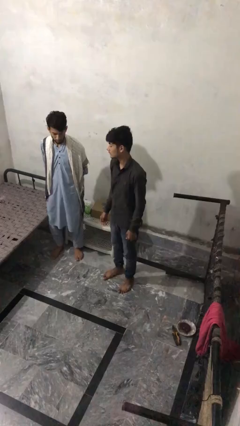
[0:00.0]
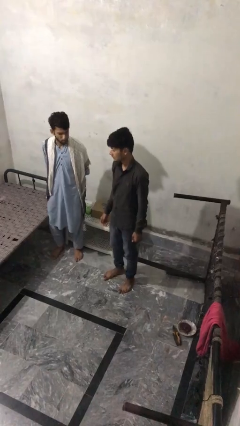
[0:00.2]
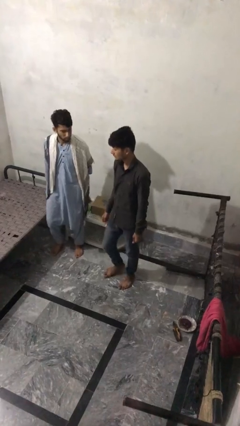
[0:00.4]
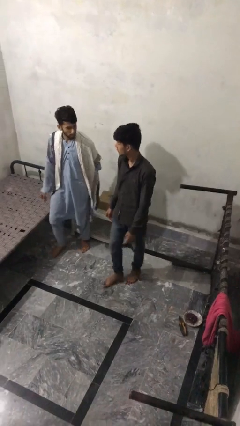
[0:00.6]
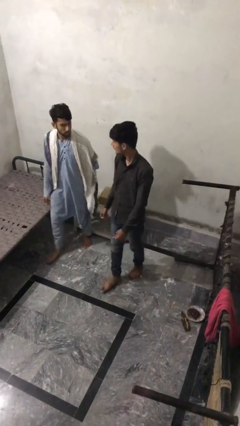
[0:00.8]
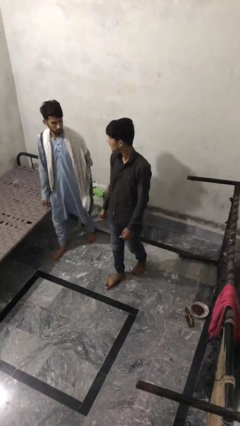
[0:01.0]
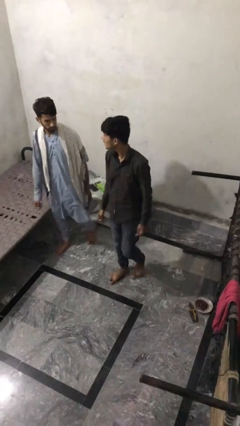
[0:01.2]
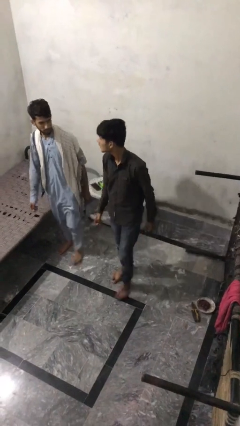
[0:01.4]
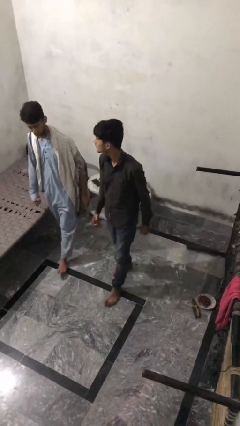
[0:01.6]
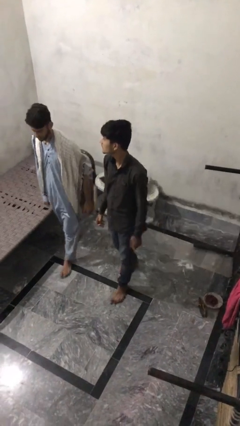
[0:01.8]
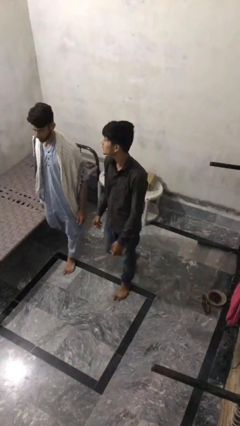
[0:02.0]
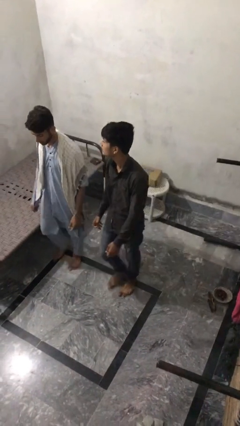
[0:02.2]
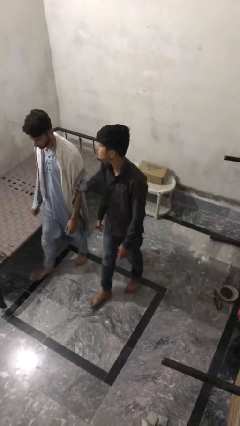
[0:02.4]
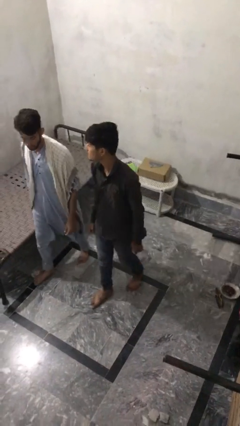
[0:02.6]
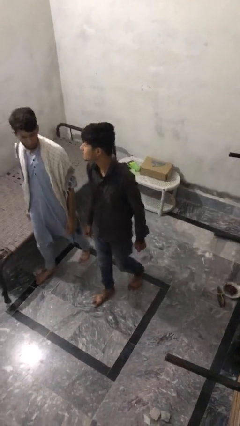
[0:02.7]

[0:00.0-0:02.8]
person talks to person

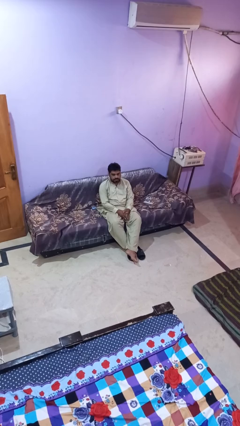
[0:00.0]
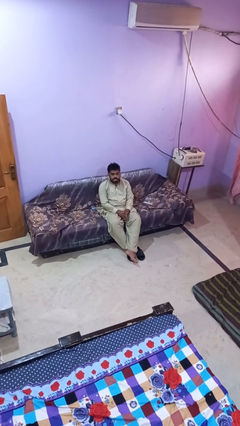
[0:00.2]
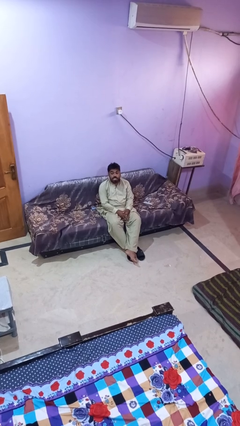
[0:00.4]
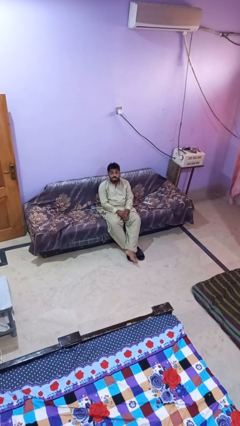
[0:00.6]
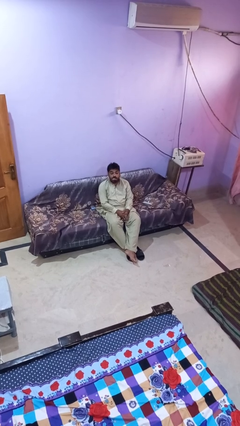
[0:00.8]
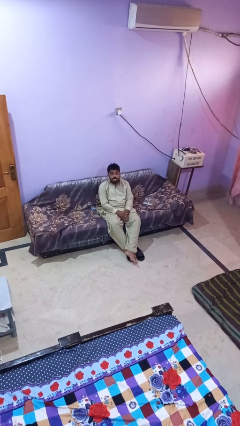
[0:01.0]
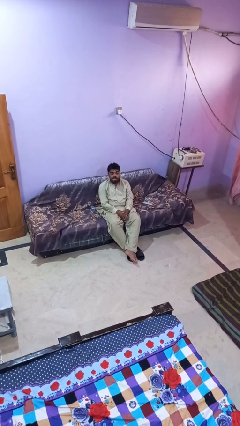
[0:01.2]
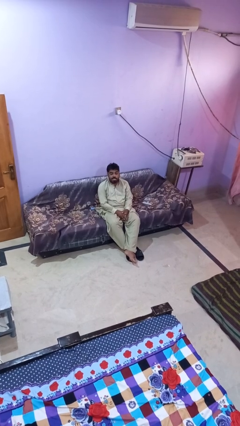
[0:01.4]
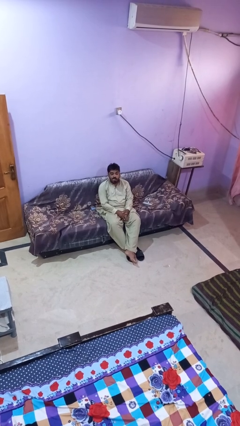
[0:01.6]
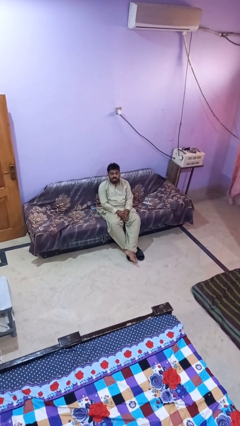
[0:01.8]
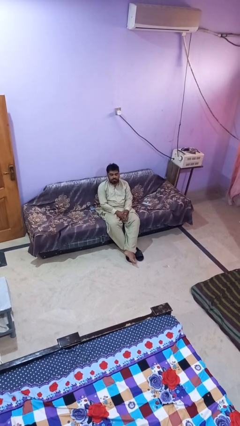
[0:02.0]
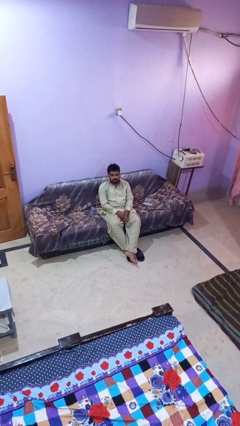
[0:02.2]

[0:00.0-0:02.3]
person sticks out tongue

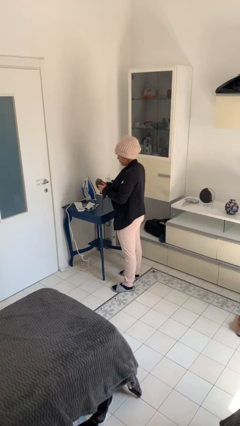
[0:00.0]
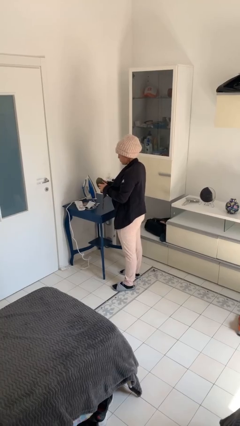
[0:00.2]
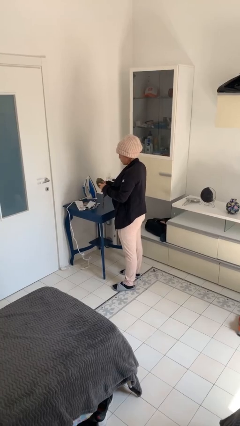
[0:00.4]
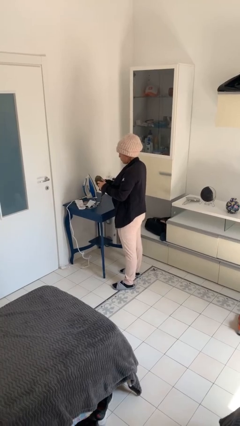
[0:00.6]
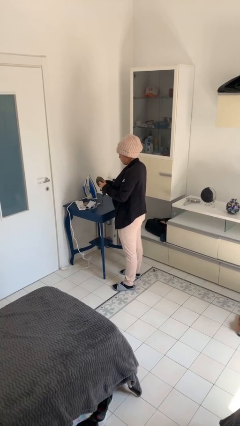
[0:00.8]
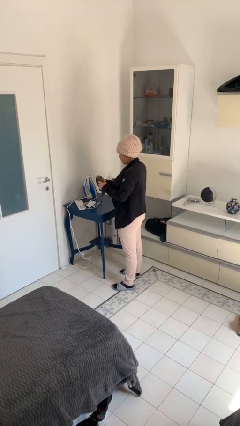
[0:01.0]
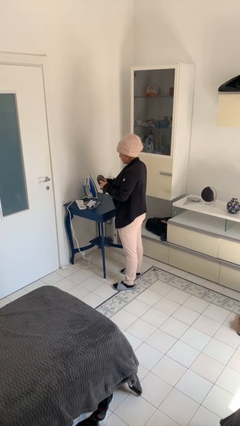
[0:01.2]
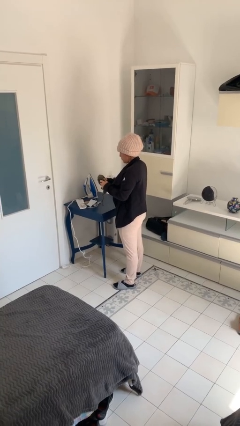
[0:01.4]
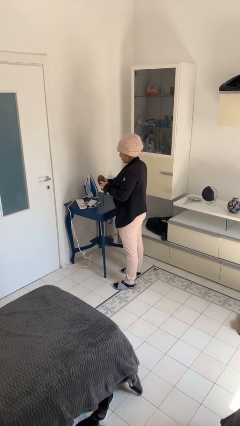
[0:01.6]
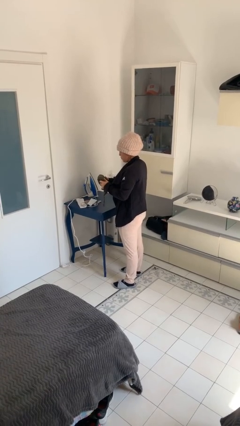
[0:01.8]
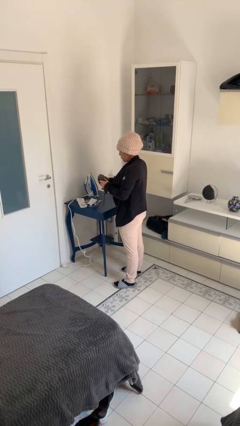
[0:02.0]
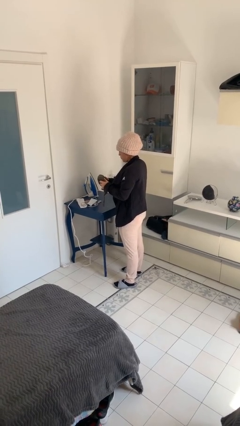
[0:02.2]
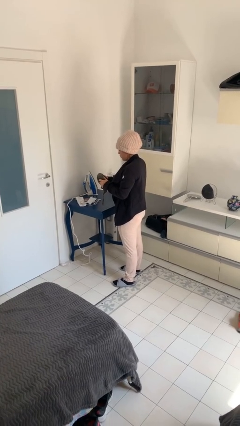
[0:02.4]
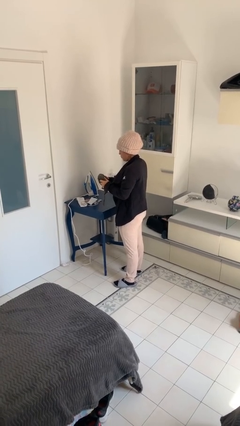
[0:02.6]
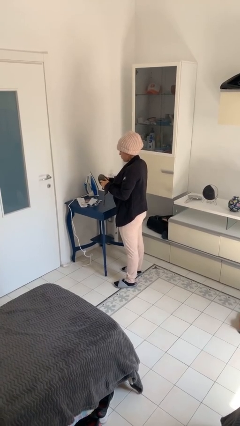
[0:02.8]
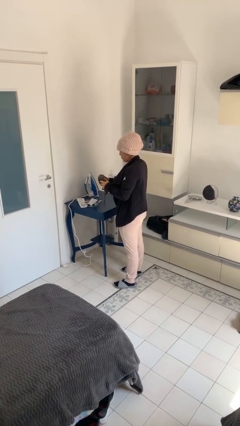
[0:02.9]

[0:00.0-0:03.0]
person squeezes object

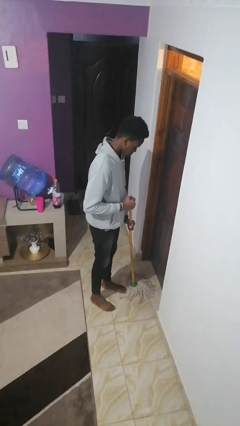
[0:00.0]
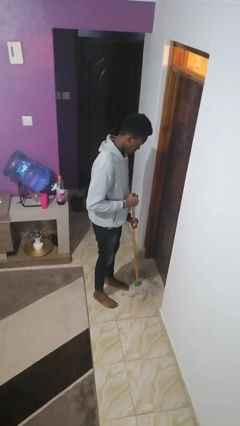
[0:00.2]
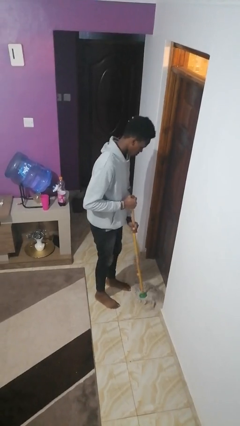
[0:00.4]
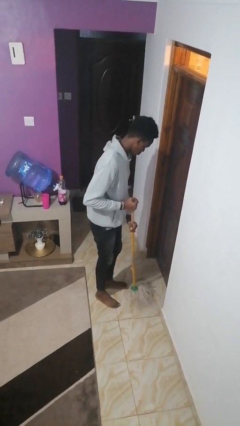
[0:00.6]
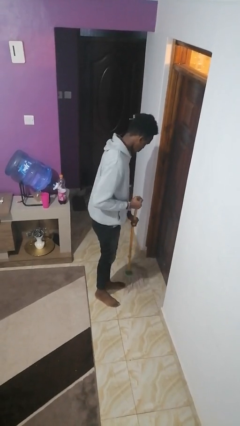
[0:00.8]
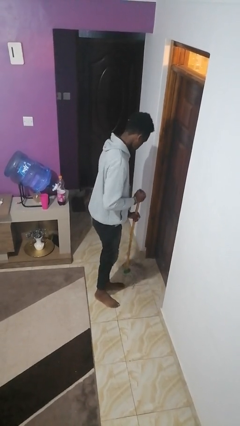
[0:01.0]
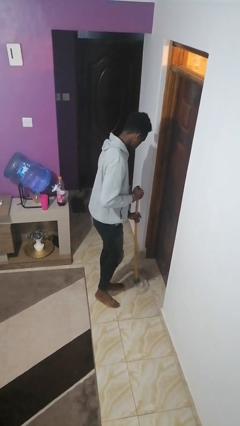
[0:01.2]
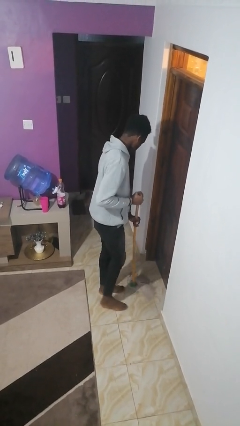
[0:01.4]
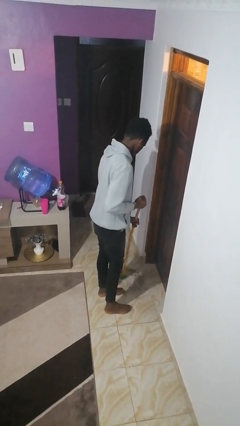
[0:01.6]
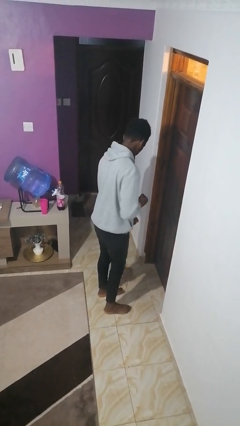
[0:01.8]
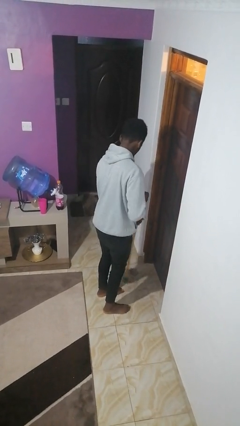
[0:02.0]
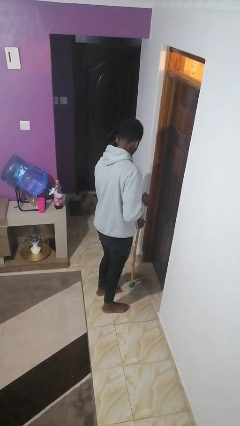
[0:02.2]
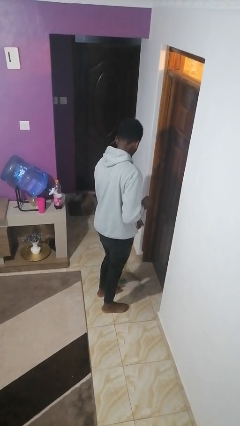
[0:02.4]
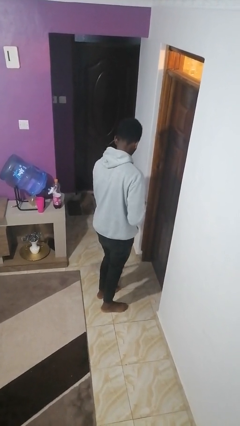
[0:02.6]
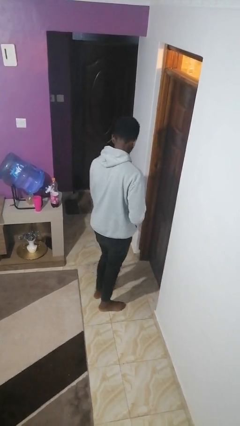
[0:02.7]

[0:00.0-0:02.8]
person mops

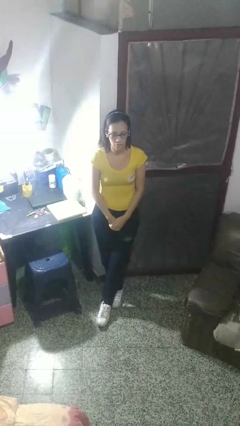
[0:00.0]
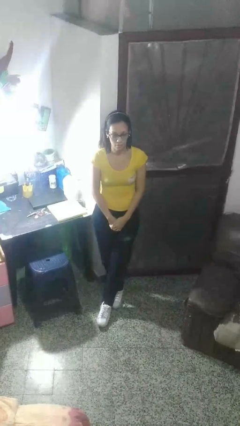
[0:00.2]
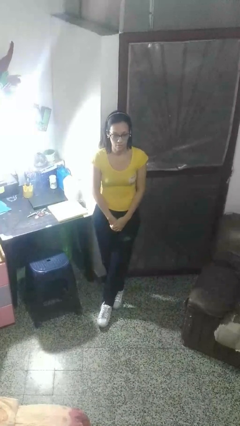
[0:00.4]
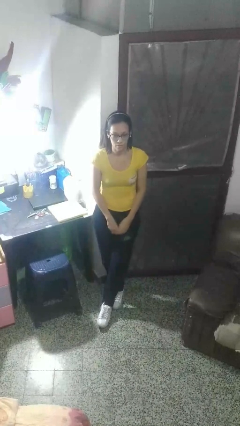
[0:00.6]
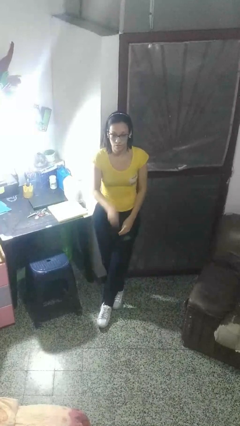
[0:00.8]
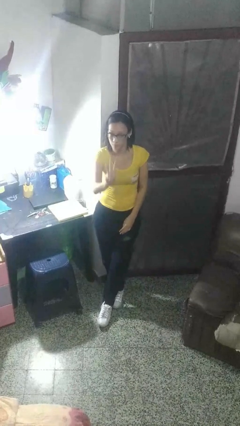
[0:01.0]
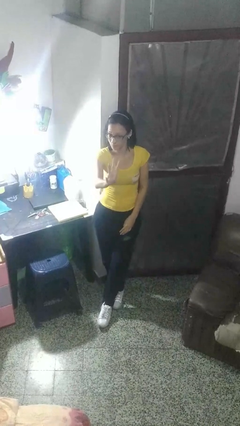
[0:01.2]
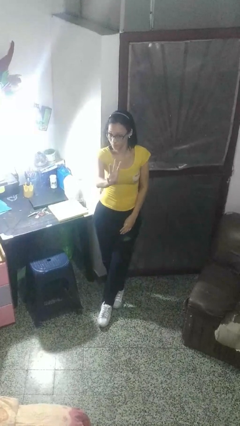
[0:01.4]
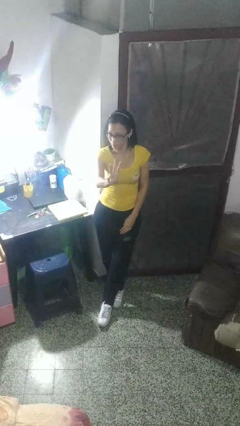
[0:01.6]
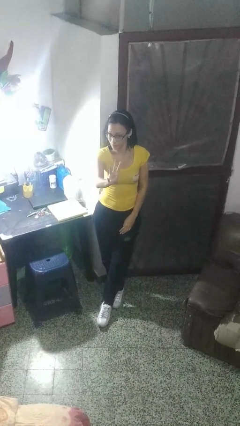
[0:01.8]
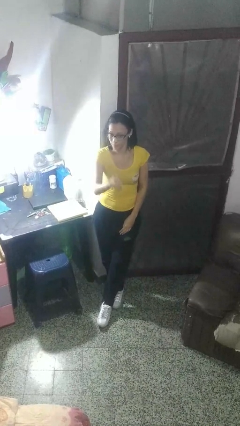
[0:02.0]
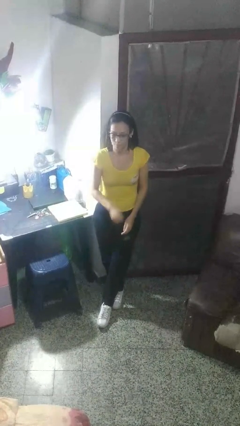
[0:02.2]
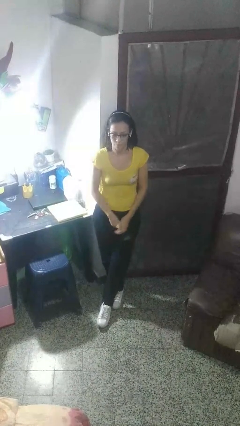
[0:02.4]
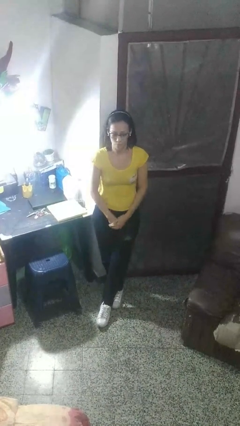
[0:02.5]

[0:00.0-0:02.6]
person gestures number three

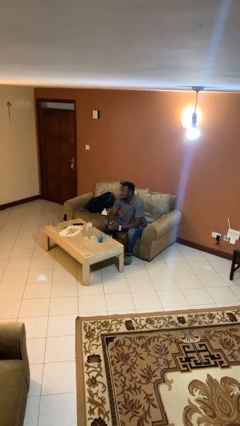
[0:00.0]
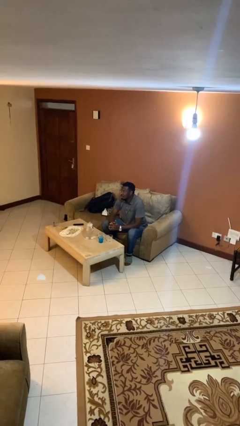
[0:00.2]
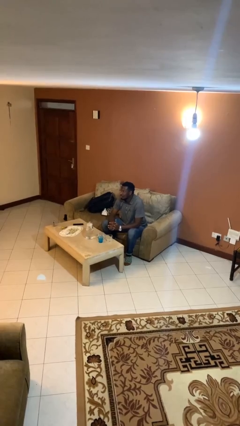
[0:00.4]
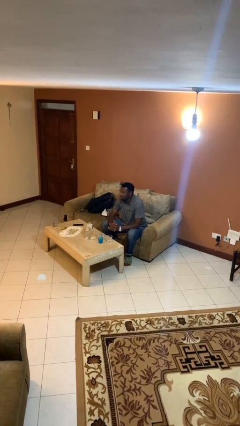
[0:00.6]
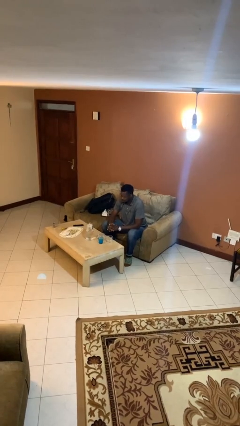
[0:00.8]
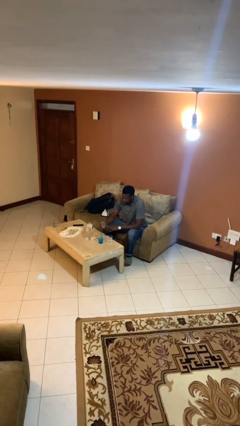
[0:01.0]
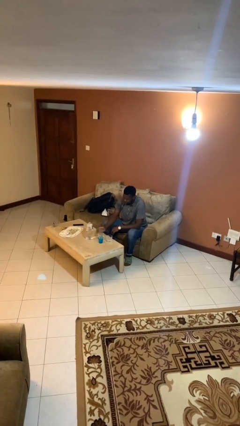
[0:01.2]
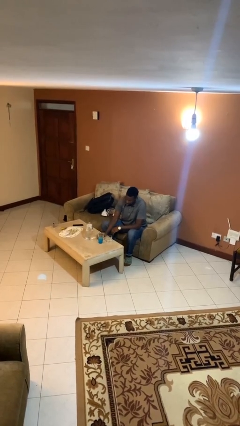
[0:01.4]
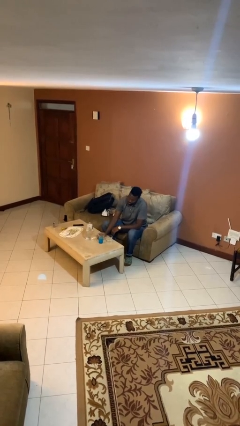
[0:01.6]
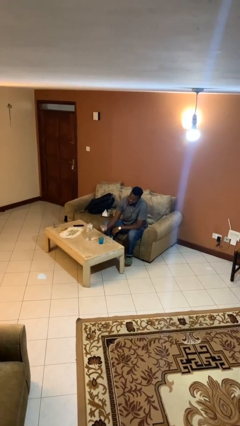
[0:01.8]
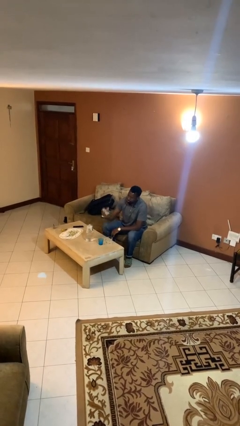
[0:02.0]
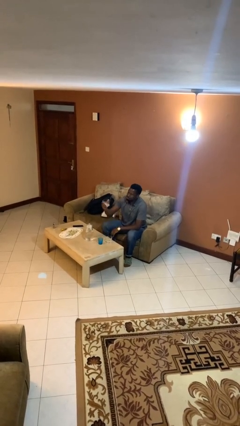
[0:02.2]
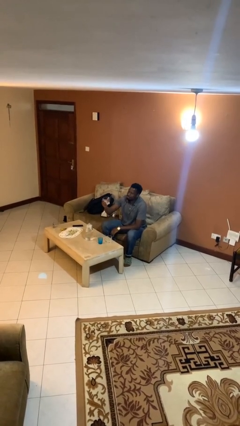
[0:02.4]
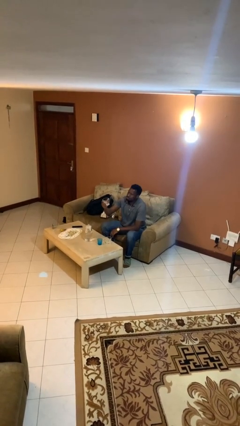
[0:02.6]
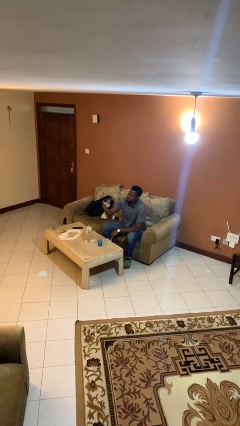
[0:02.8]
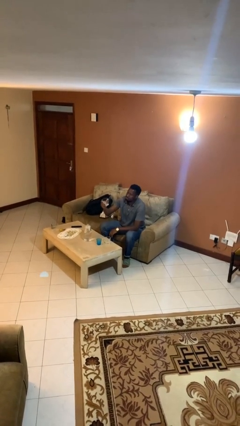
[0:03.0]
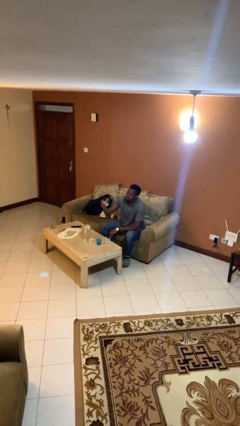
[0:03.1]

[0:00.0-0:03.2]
person picks up object from table

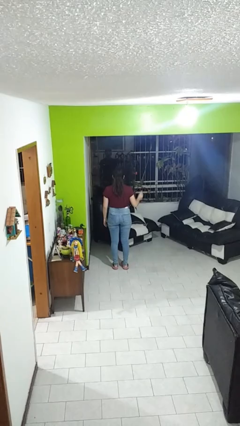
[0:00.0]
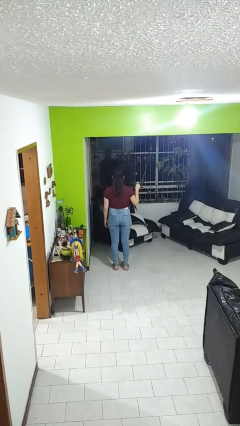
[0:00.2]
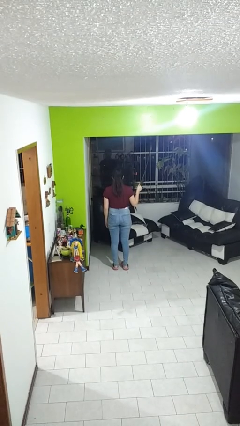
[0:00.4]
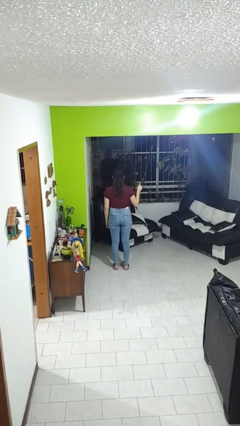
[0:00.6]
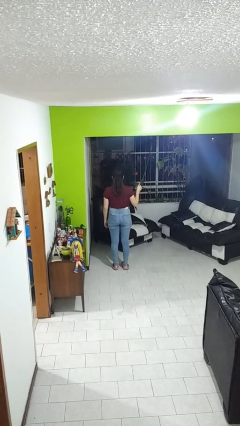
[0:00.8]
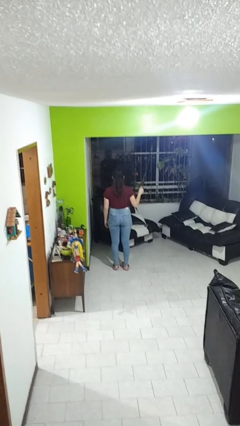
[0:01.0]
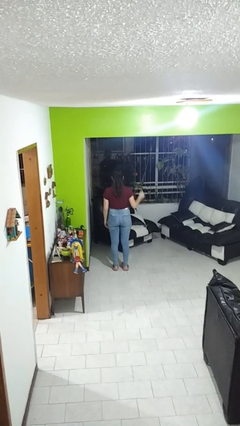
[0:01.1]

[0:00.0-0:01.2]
person gestures thumbs up
